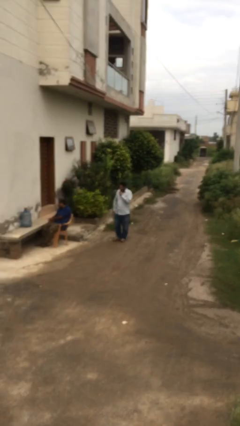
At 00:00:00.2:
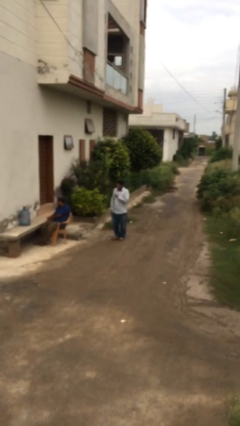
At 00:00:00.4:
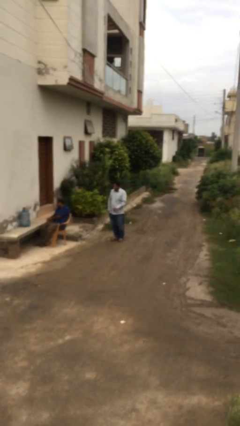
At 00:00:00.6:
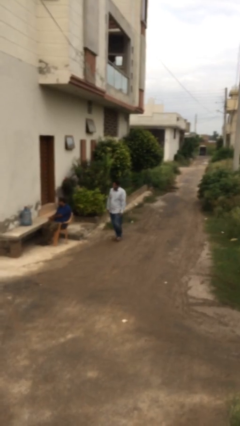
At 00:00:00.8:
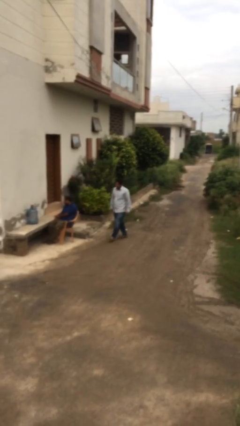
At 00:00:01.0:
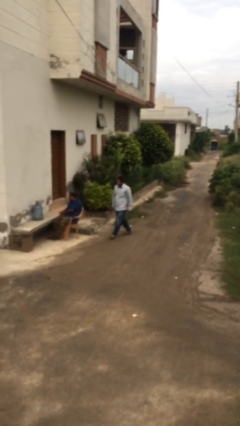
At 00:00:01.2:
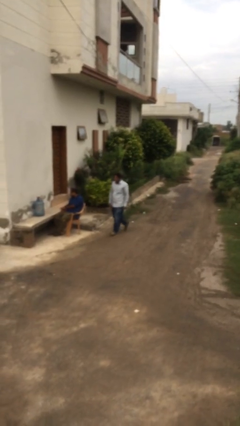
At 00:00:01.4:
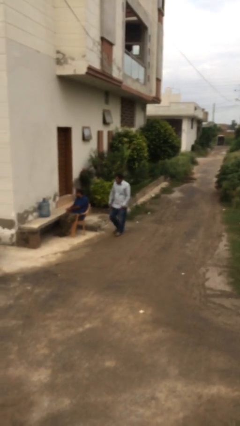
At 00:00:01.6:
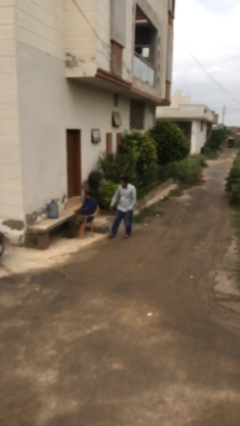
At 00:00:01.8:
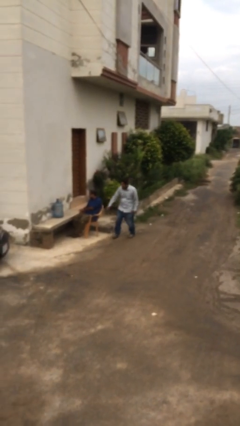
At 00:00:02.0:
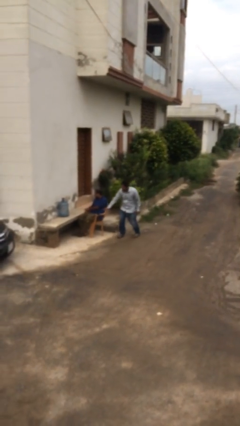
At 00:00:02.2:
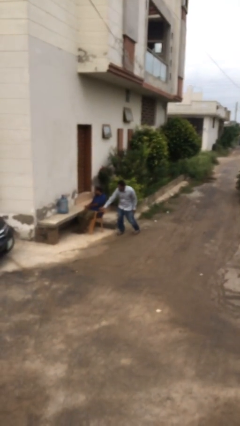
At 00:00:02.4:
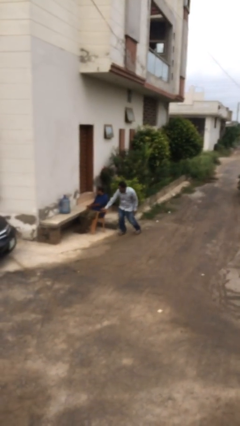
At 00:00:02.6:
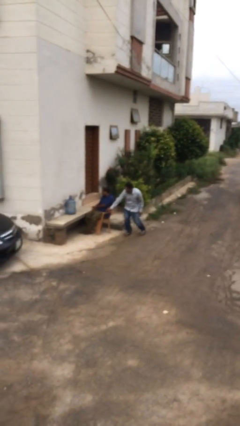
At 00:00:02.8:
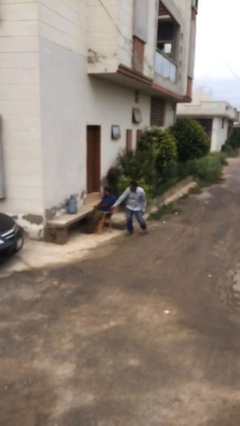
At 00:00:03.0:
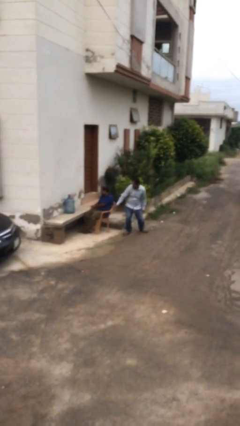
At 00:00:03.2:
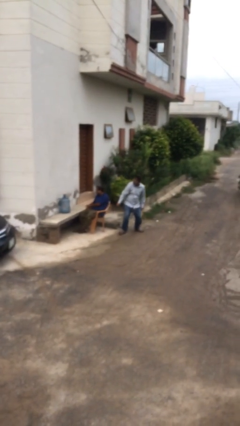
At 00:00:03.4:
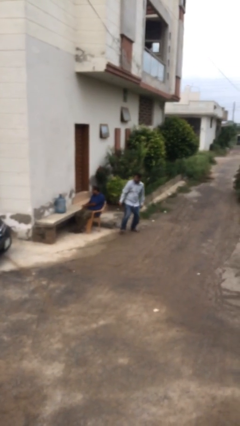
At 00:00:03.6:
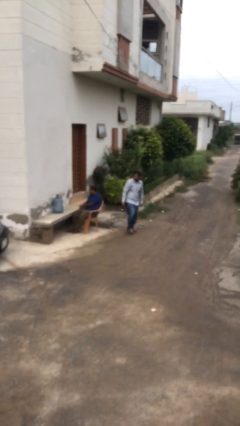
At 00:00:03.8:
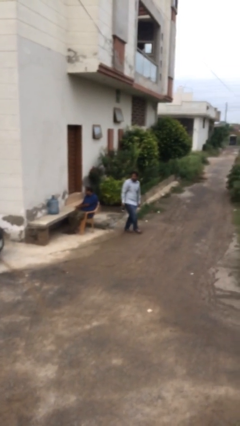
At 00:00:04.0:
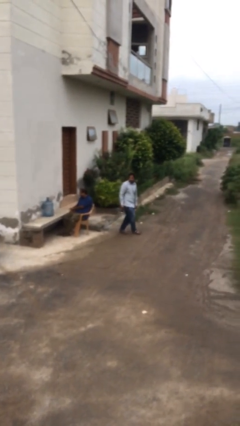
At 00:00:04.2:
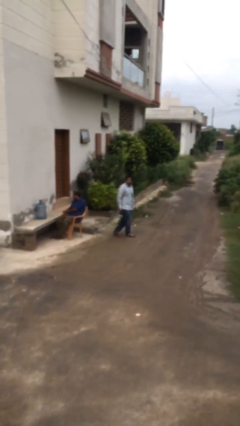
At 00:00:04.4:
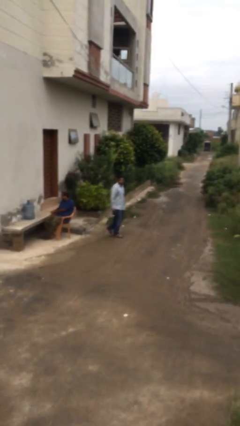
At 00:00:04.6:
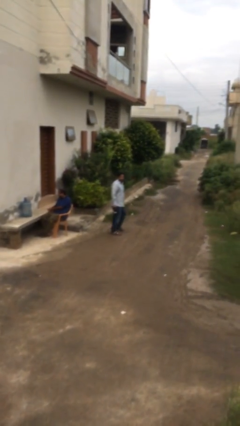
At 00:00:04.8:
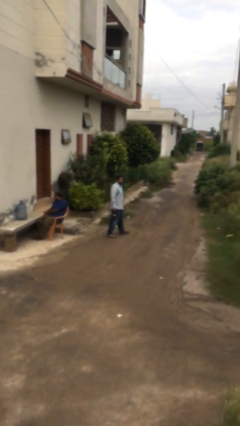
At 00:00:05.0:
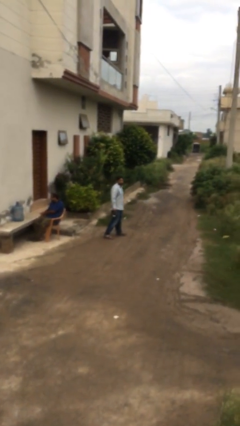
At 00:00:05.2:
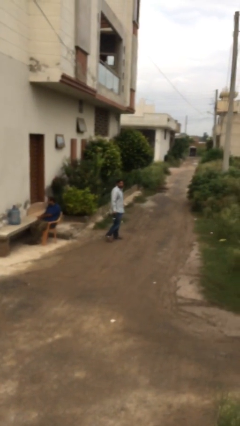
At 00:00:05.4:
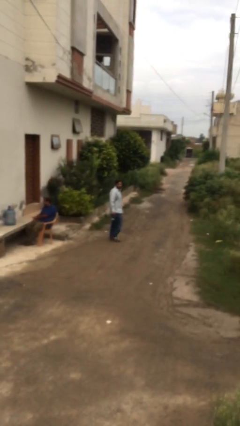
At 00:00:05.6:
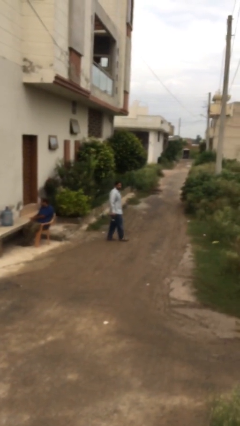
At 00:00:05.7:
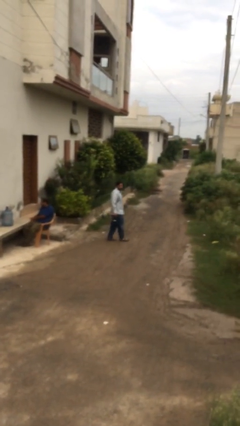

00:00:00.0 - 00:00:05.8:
person steals object from person

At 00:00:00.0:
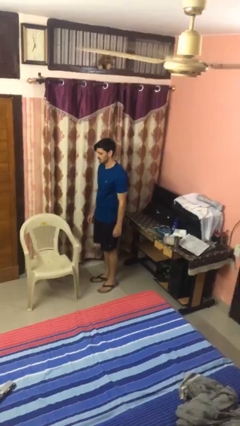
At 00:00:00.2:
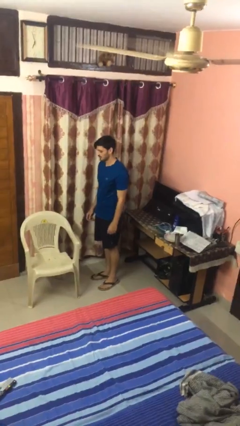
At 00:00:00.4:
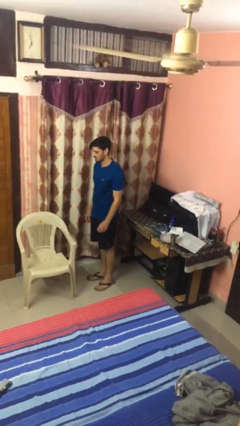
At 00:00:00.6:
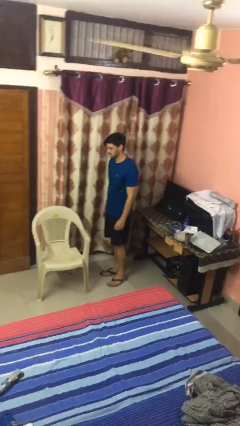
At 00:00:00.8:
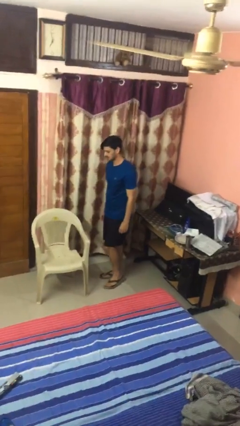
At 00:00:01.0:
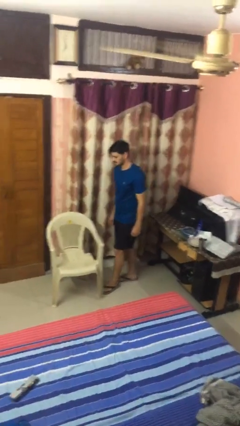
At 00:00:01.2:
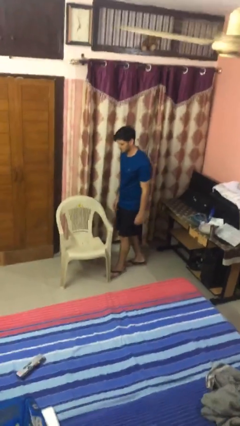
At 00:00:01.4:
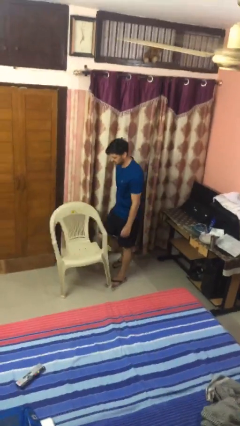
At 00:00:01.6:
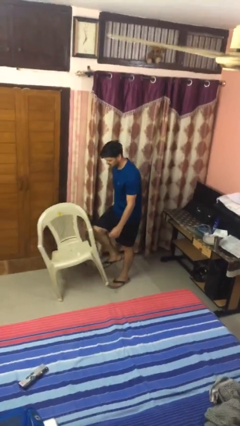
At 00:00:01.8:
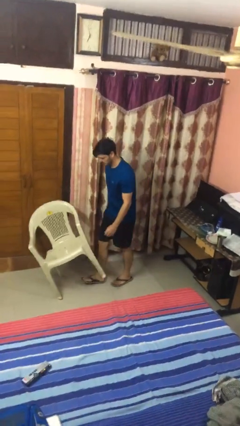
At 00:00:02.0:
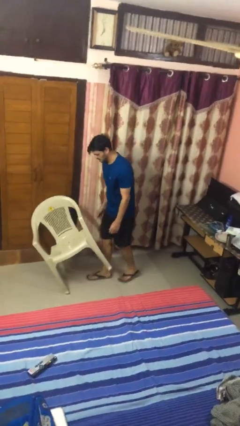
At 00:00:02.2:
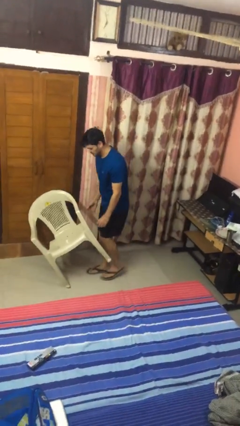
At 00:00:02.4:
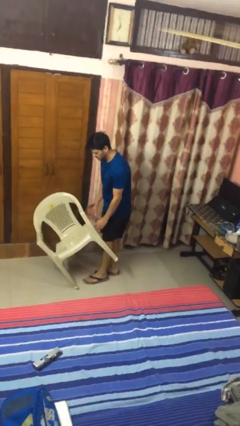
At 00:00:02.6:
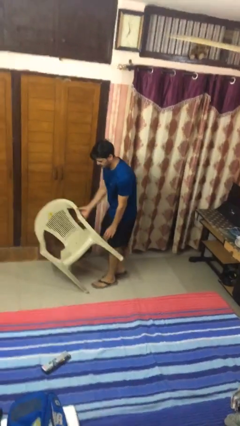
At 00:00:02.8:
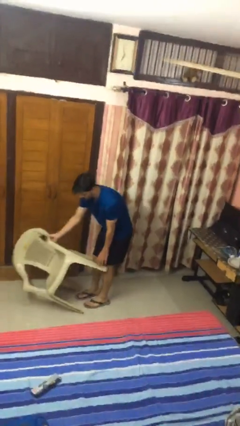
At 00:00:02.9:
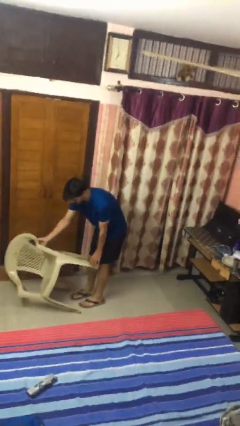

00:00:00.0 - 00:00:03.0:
person knocks over furniture

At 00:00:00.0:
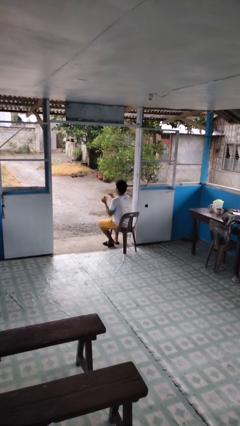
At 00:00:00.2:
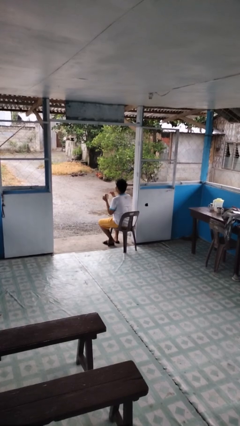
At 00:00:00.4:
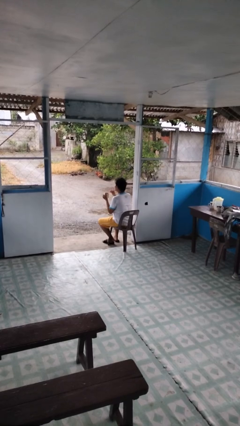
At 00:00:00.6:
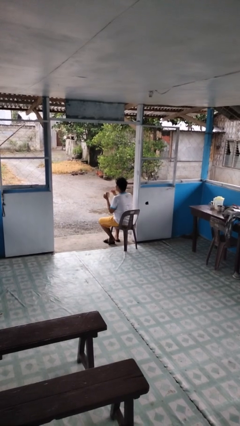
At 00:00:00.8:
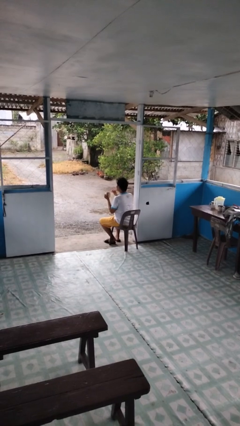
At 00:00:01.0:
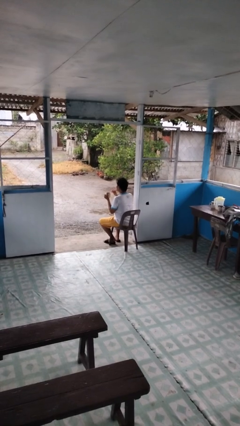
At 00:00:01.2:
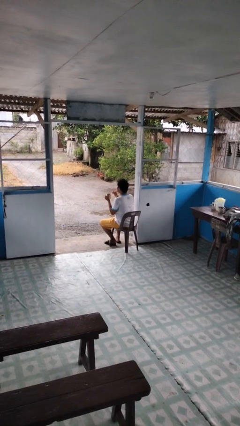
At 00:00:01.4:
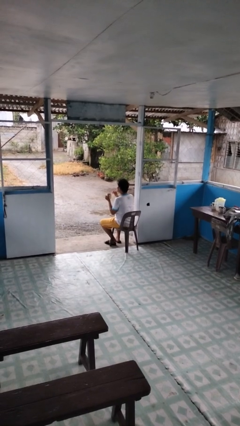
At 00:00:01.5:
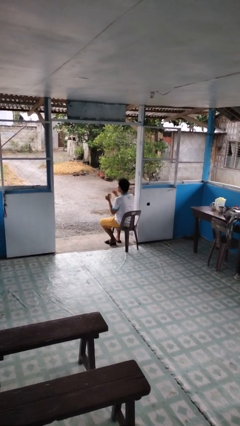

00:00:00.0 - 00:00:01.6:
person drinks from straw

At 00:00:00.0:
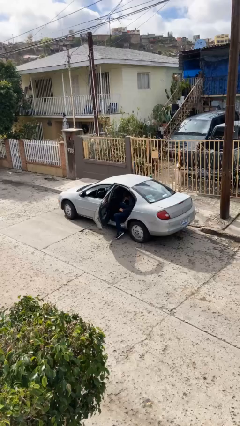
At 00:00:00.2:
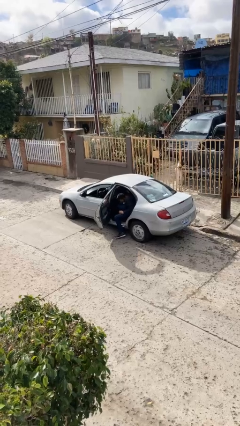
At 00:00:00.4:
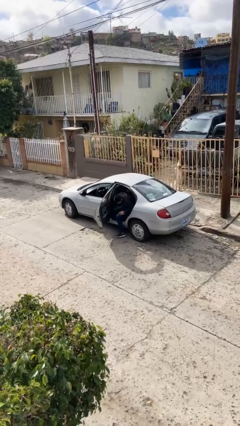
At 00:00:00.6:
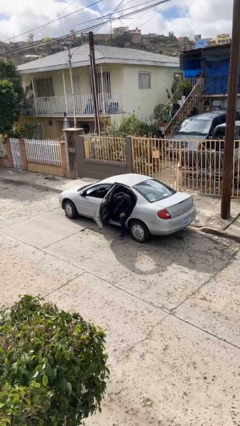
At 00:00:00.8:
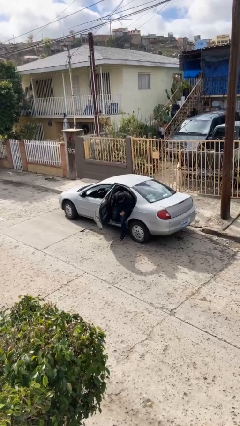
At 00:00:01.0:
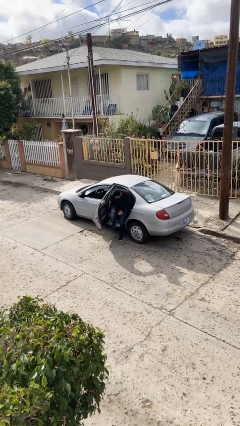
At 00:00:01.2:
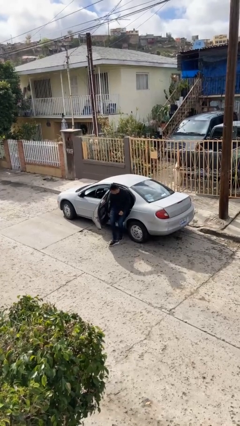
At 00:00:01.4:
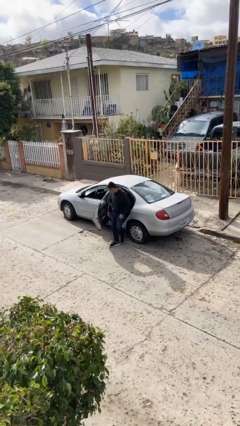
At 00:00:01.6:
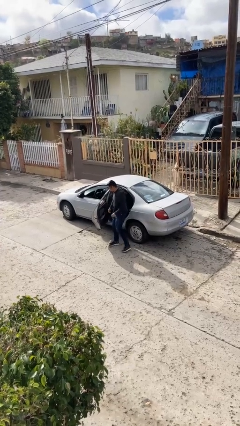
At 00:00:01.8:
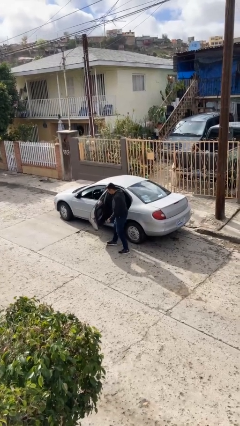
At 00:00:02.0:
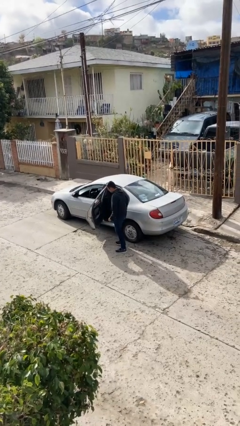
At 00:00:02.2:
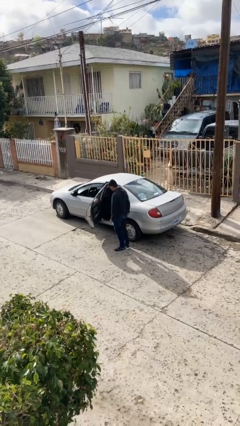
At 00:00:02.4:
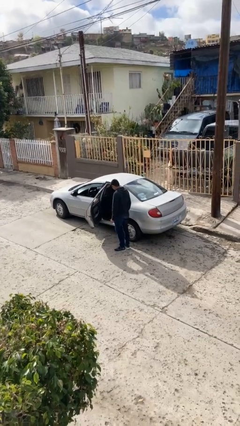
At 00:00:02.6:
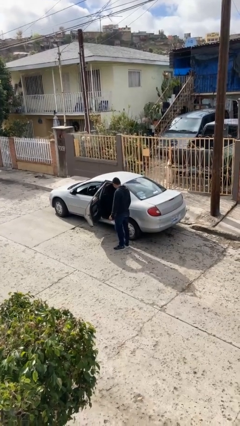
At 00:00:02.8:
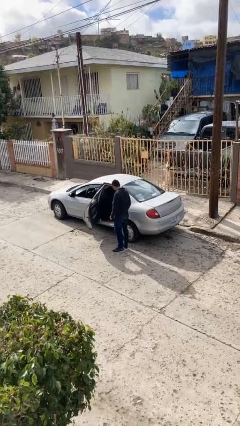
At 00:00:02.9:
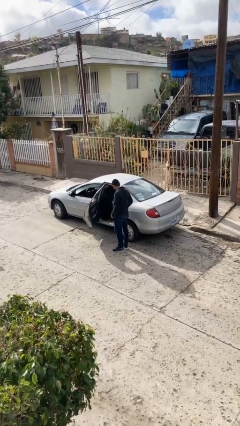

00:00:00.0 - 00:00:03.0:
person exits car

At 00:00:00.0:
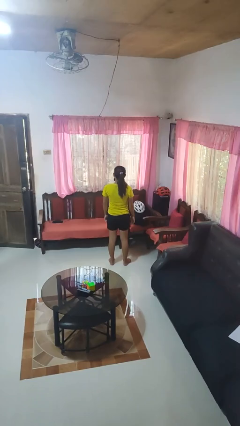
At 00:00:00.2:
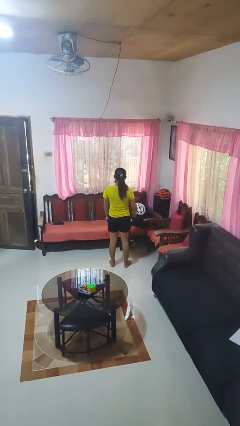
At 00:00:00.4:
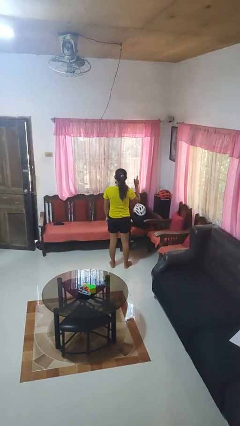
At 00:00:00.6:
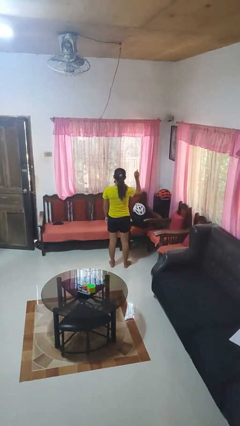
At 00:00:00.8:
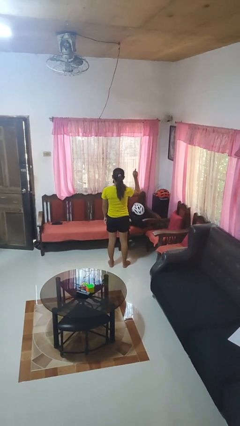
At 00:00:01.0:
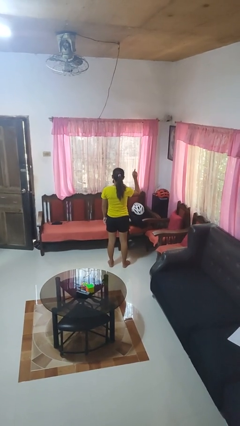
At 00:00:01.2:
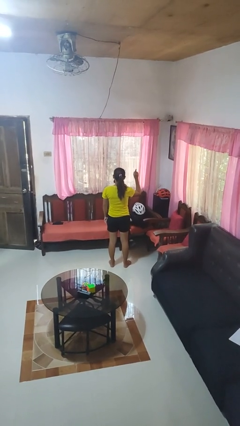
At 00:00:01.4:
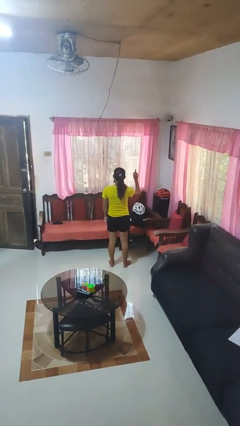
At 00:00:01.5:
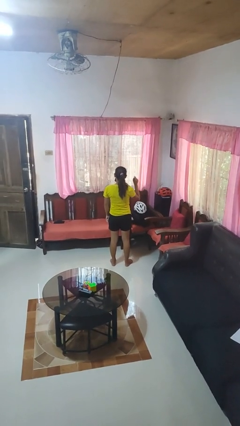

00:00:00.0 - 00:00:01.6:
person gestures number one

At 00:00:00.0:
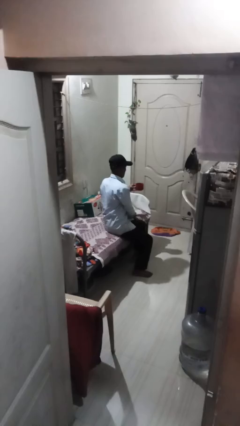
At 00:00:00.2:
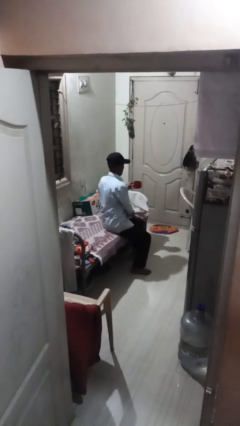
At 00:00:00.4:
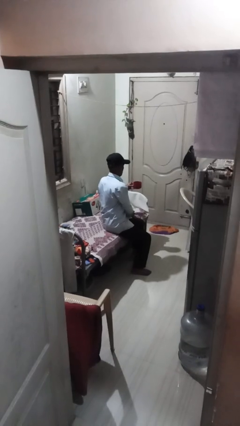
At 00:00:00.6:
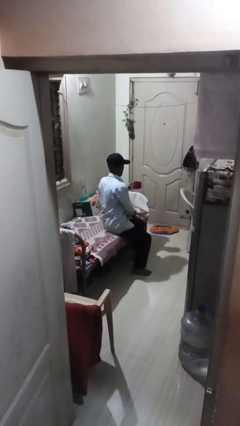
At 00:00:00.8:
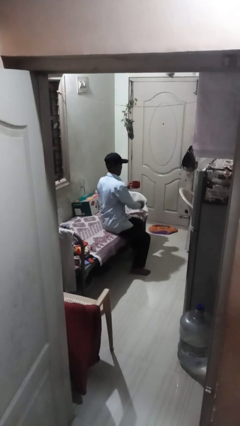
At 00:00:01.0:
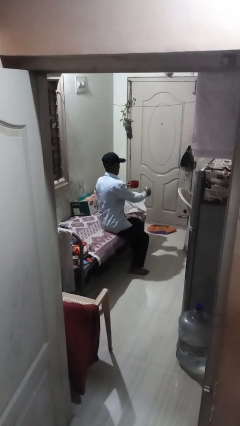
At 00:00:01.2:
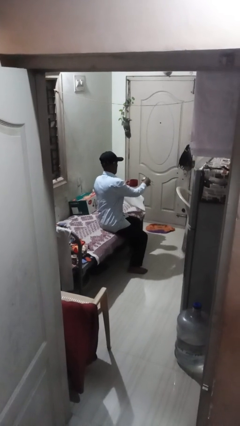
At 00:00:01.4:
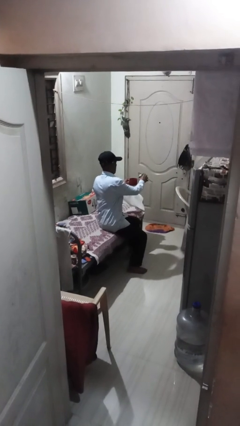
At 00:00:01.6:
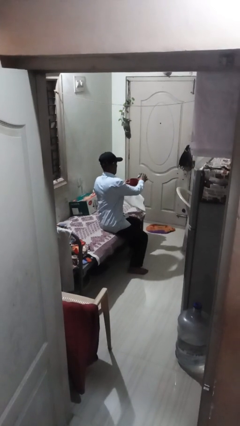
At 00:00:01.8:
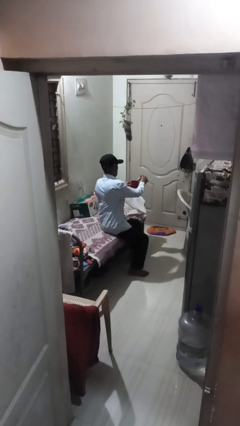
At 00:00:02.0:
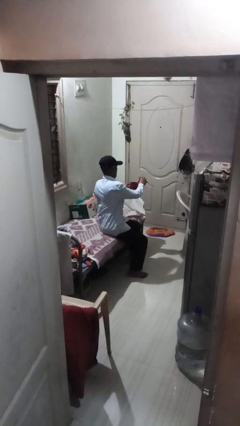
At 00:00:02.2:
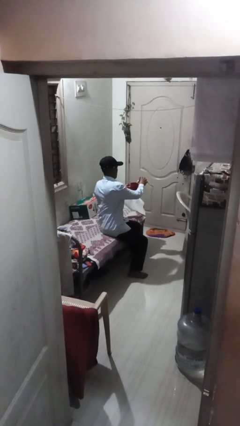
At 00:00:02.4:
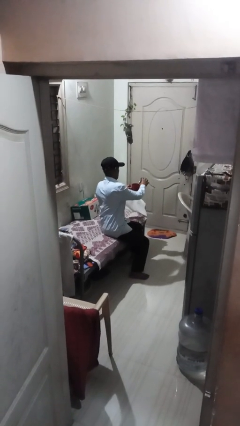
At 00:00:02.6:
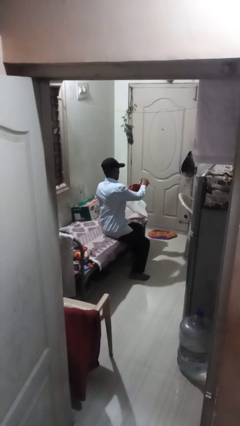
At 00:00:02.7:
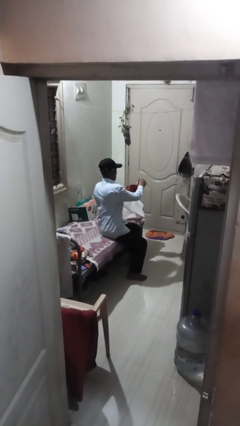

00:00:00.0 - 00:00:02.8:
person pours coffee into mug
